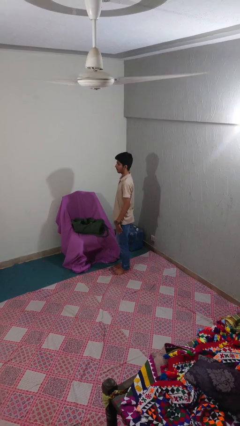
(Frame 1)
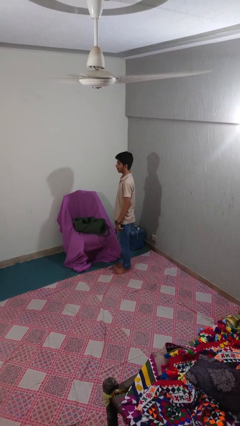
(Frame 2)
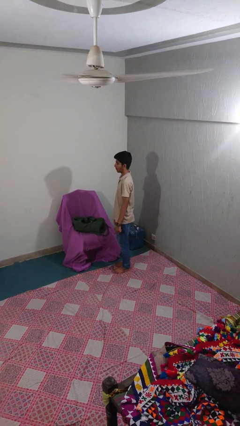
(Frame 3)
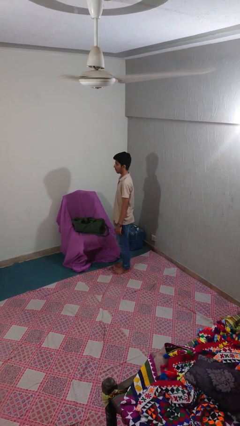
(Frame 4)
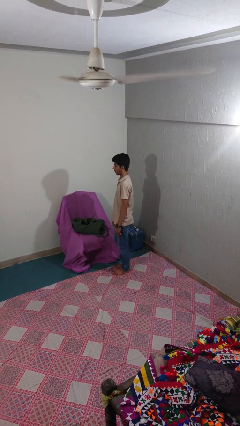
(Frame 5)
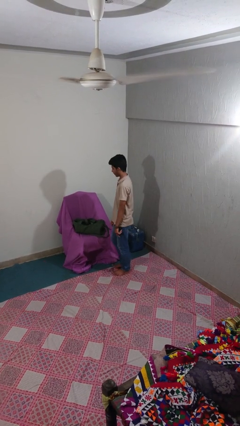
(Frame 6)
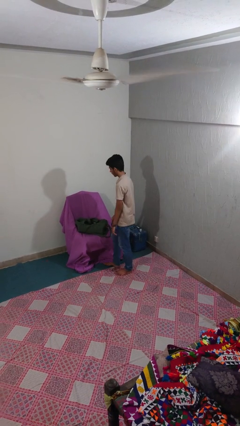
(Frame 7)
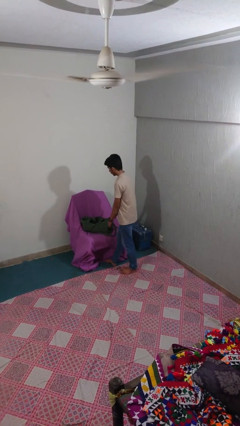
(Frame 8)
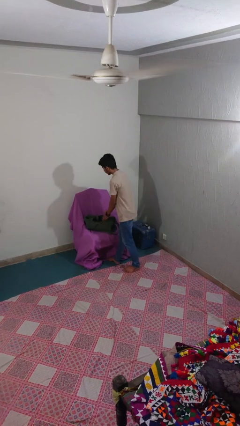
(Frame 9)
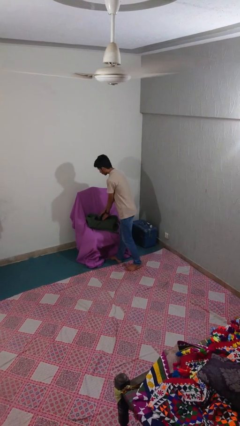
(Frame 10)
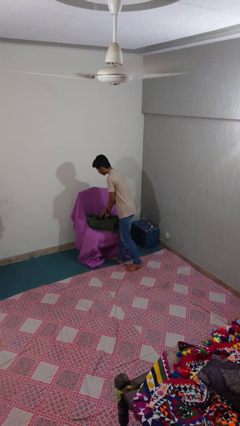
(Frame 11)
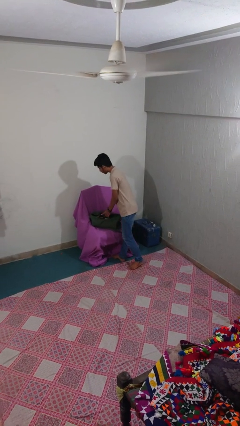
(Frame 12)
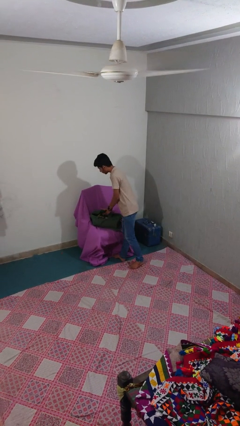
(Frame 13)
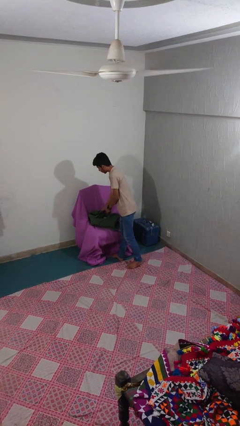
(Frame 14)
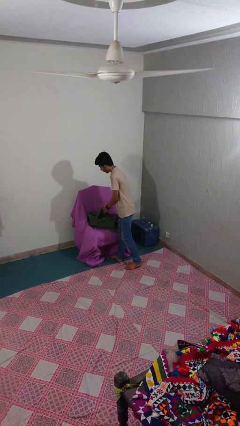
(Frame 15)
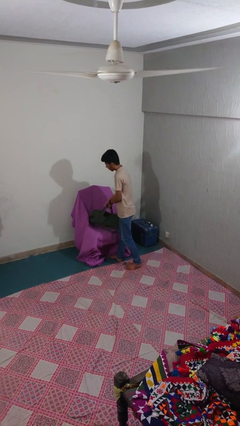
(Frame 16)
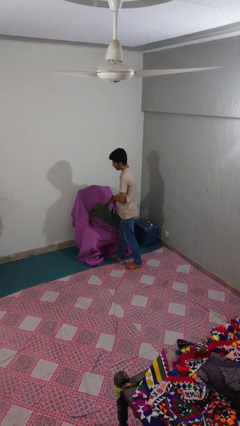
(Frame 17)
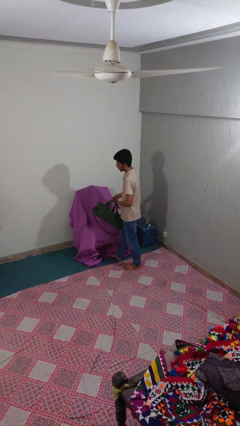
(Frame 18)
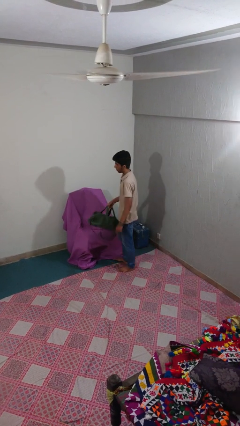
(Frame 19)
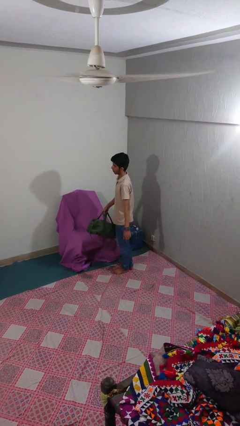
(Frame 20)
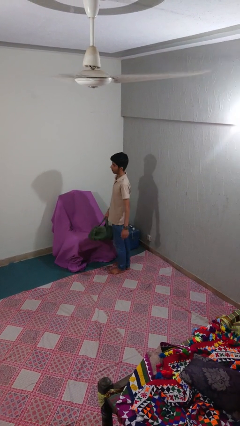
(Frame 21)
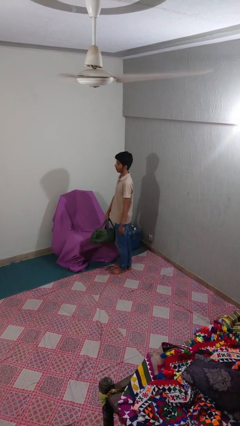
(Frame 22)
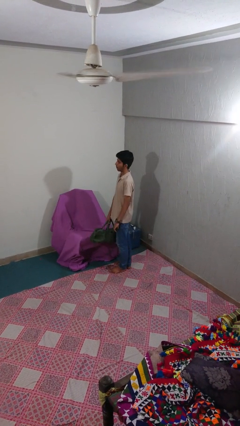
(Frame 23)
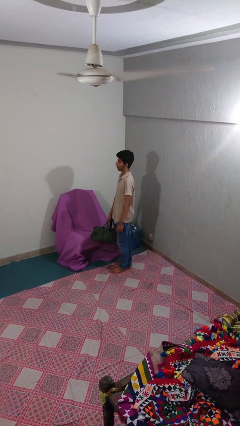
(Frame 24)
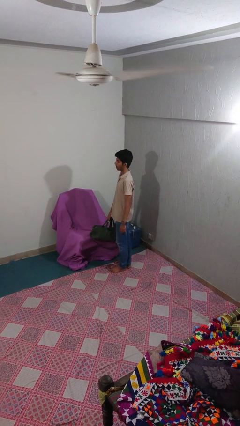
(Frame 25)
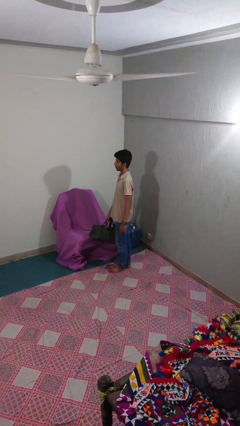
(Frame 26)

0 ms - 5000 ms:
person picks up object from couch

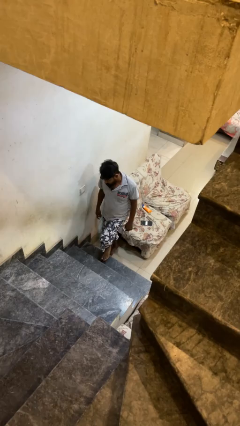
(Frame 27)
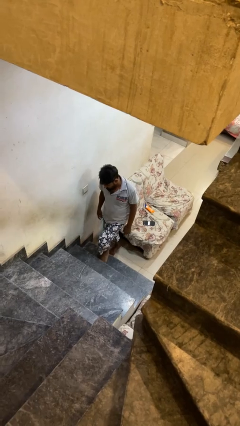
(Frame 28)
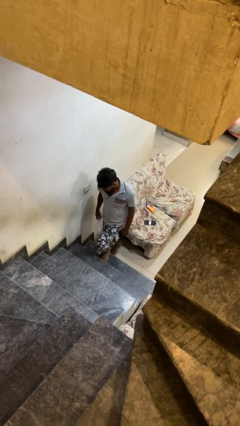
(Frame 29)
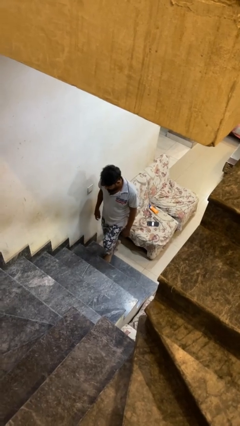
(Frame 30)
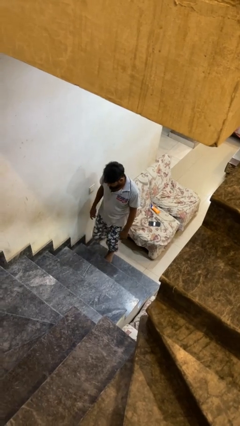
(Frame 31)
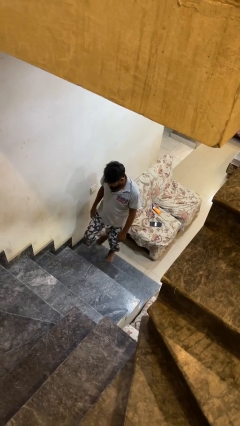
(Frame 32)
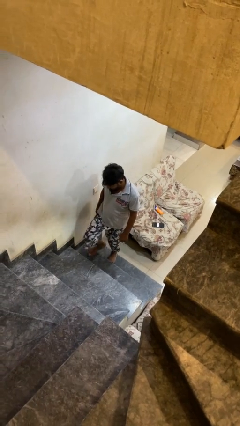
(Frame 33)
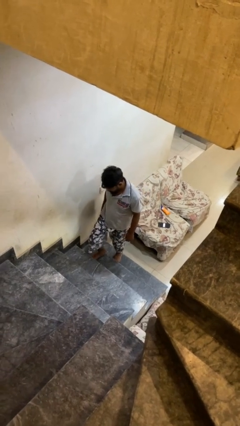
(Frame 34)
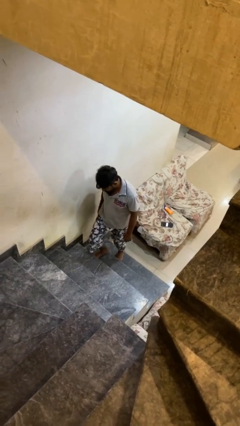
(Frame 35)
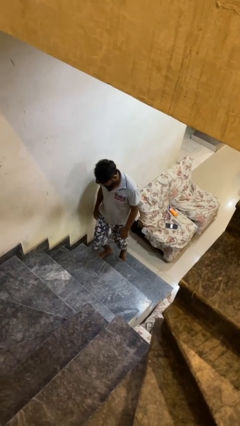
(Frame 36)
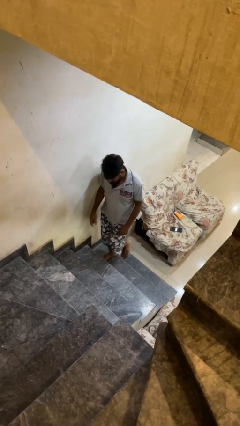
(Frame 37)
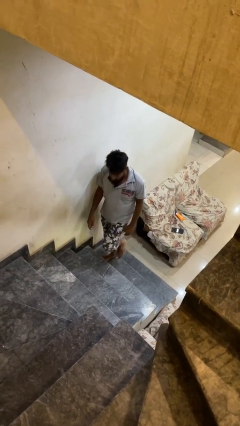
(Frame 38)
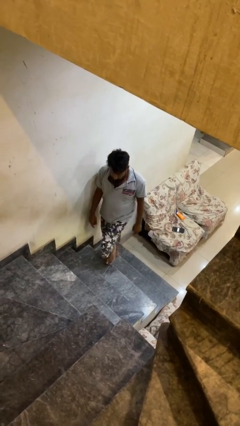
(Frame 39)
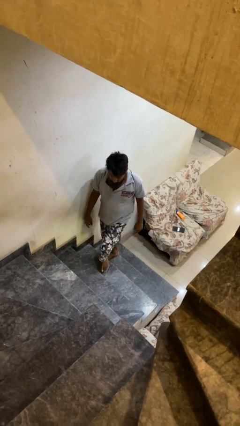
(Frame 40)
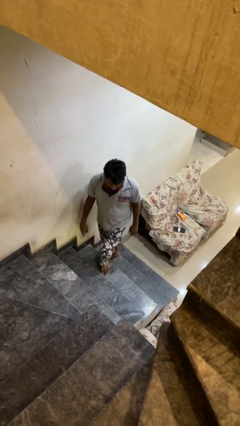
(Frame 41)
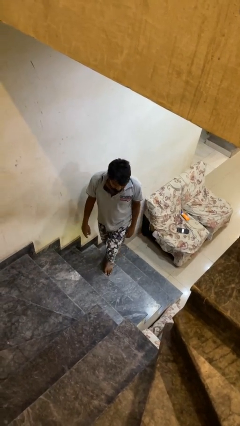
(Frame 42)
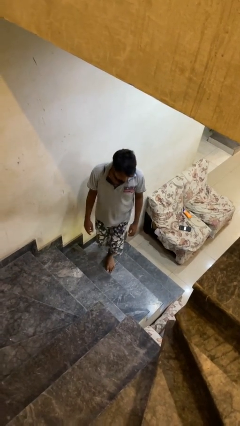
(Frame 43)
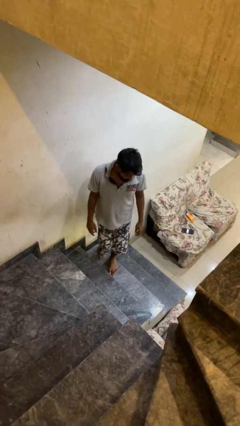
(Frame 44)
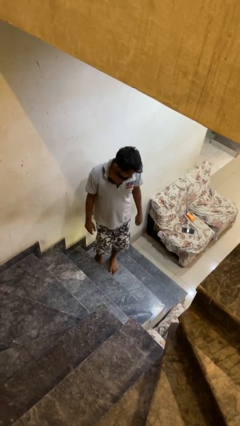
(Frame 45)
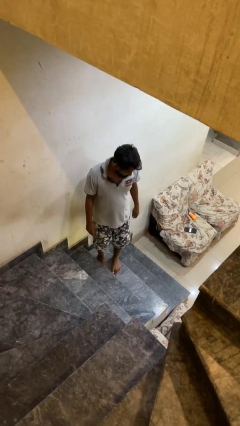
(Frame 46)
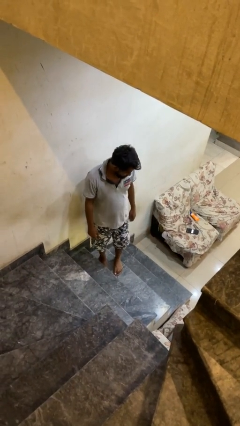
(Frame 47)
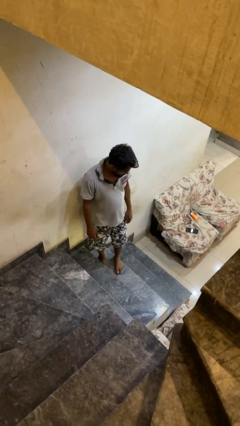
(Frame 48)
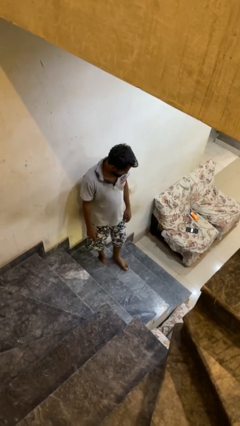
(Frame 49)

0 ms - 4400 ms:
person climbs up stairs

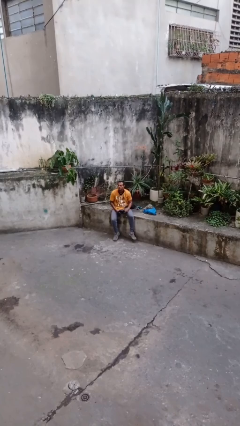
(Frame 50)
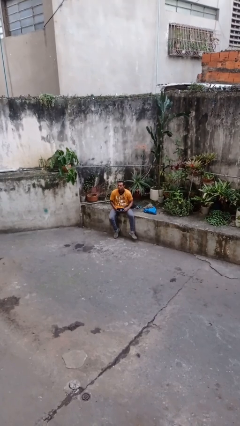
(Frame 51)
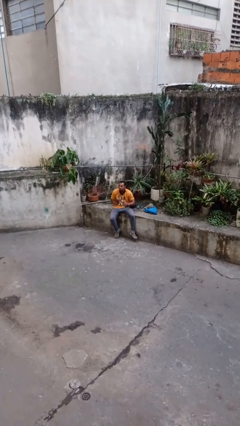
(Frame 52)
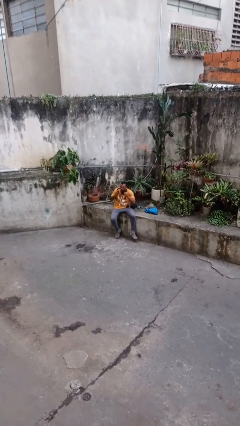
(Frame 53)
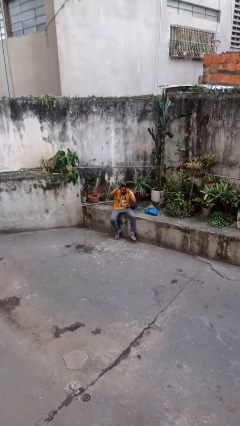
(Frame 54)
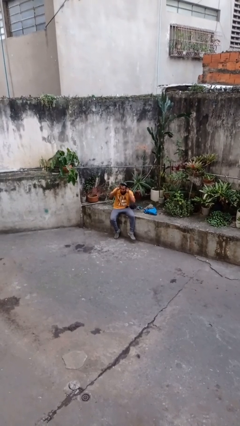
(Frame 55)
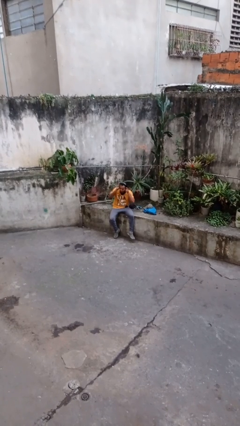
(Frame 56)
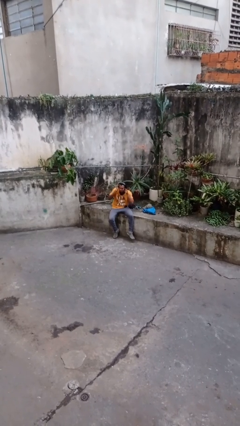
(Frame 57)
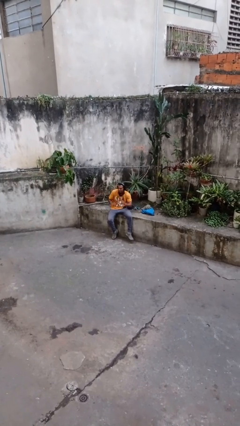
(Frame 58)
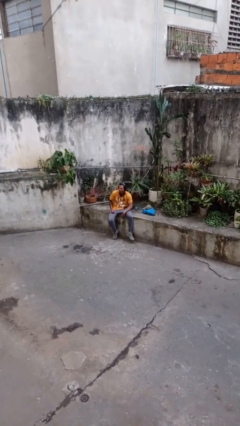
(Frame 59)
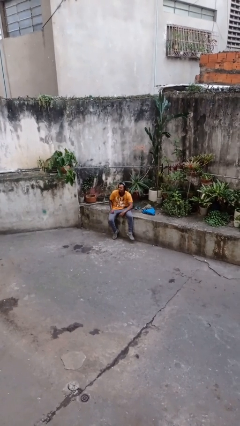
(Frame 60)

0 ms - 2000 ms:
person puts on headphones

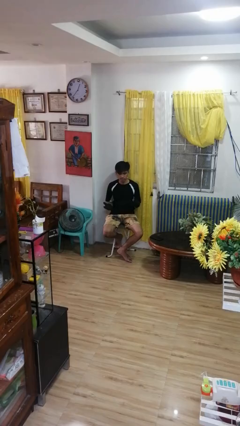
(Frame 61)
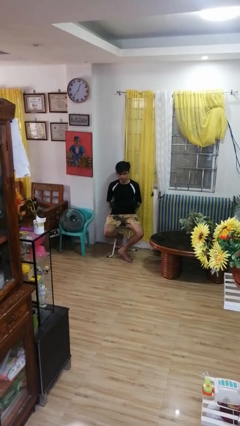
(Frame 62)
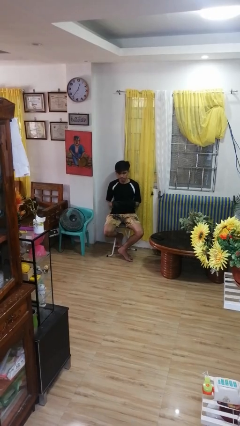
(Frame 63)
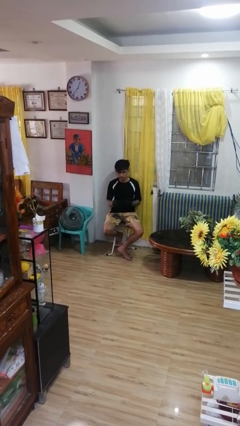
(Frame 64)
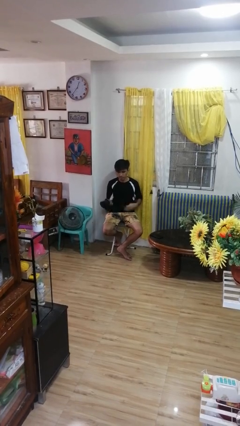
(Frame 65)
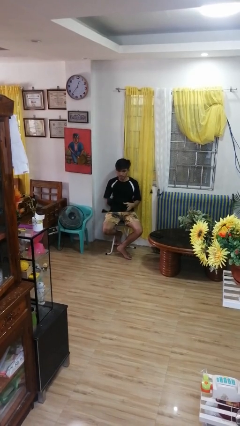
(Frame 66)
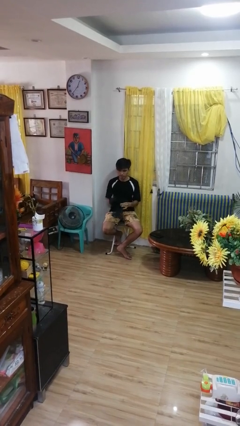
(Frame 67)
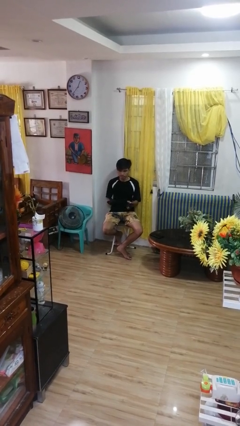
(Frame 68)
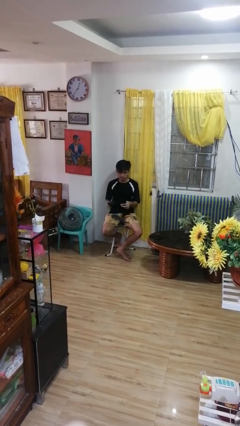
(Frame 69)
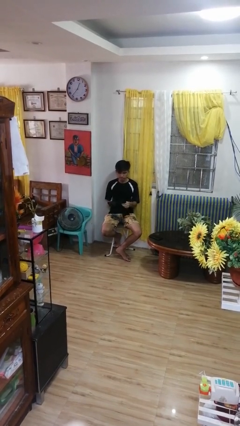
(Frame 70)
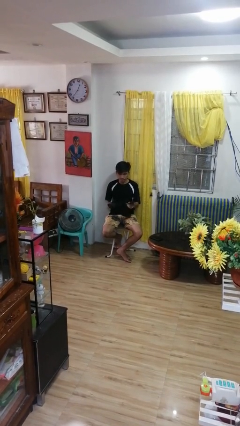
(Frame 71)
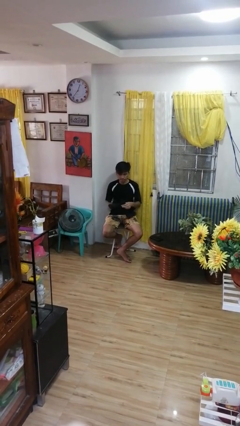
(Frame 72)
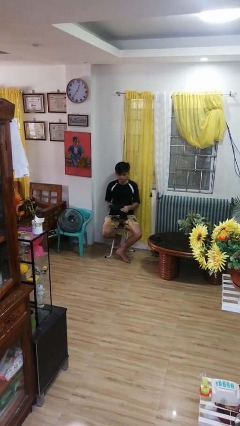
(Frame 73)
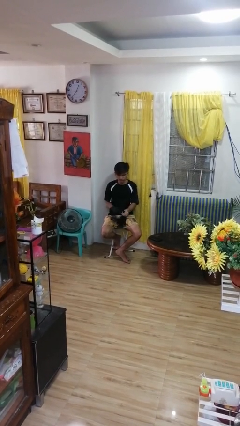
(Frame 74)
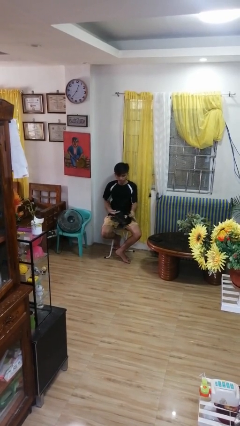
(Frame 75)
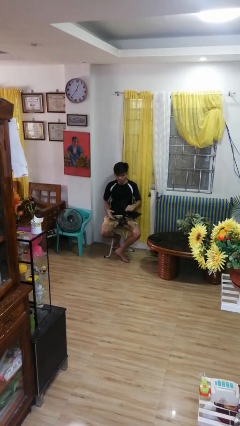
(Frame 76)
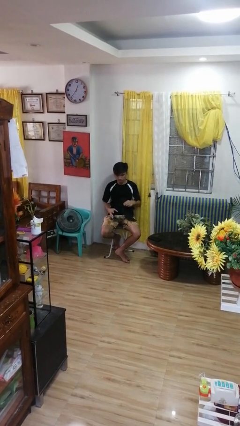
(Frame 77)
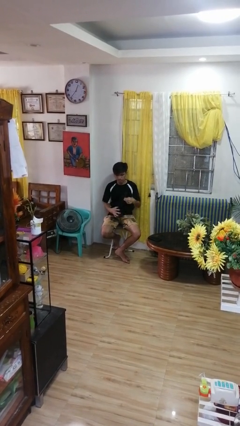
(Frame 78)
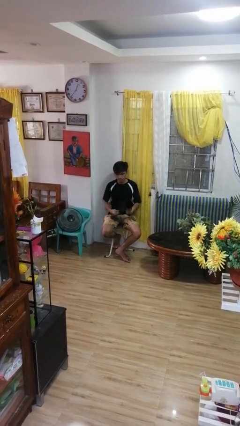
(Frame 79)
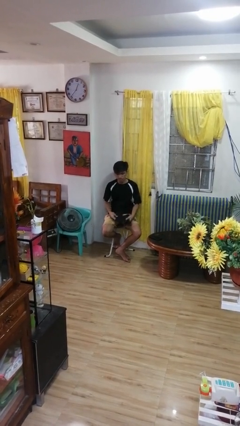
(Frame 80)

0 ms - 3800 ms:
person takes off gloves

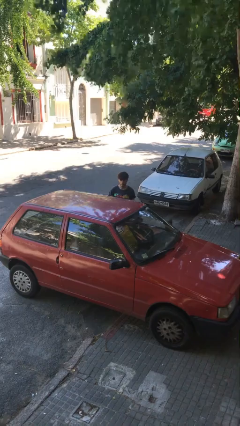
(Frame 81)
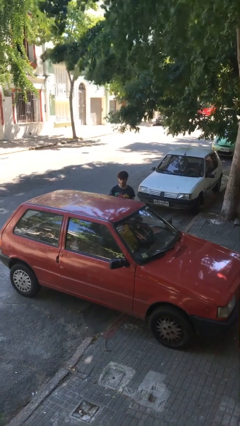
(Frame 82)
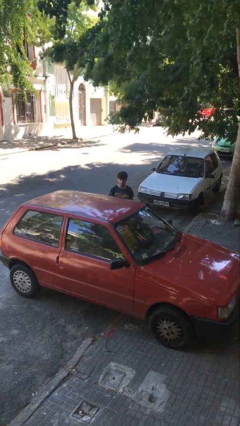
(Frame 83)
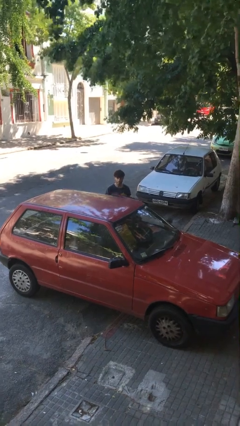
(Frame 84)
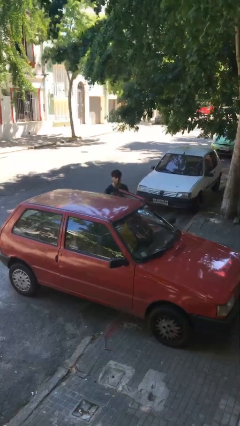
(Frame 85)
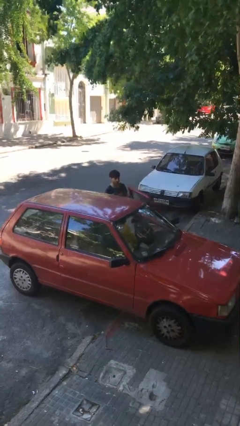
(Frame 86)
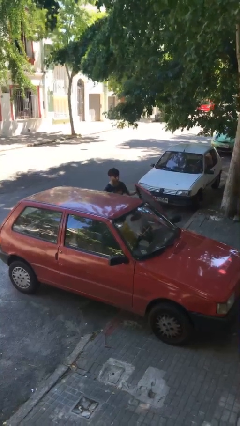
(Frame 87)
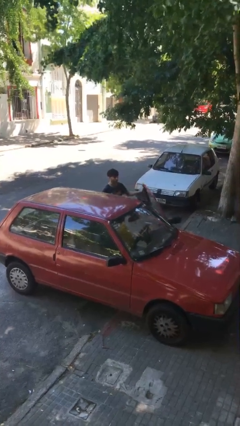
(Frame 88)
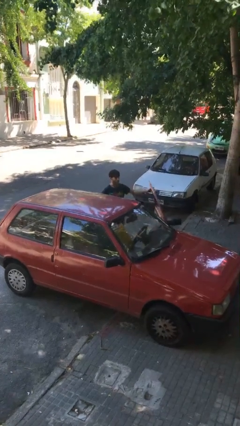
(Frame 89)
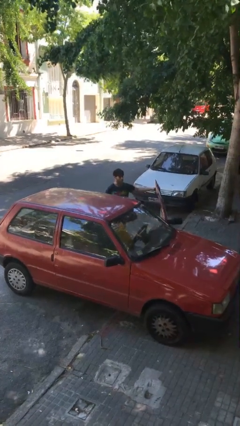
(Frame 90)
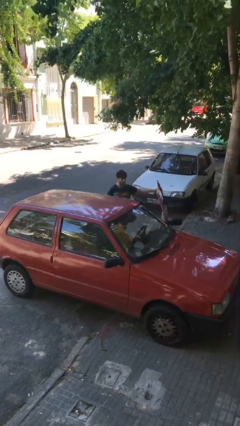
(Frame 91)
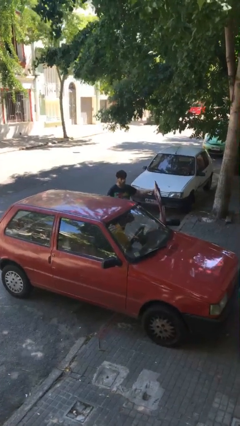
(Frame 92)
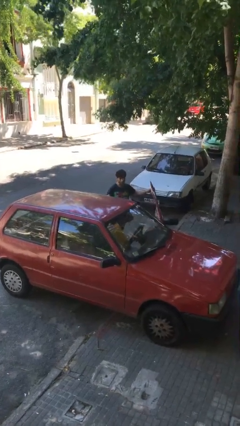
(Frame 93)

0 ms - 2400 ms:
person opens car door
